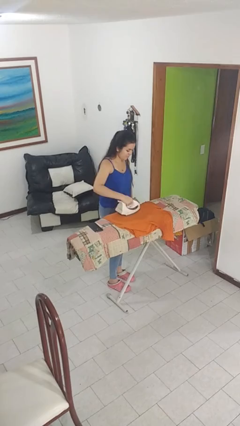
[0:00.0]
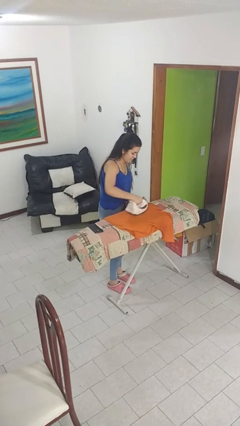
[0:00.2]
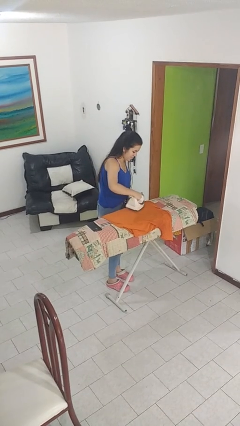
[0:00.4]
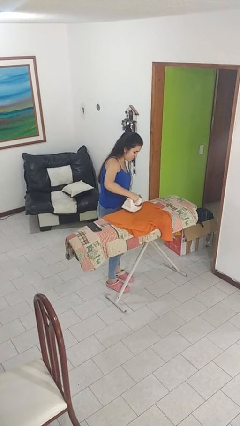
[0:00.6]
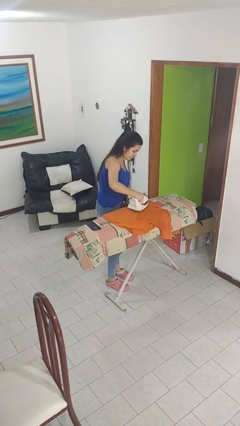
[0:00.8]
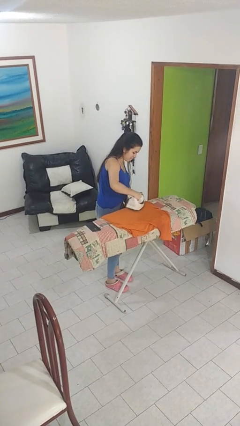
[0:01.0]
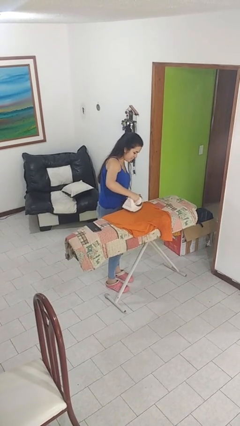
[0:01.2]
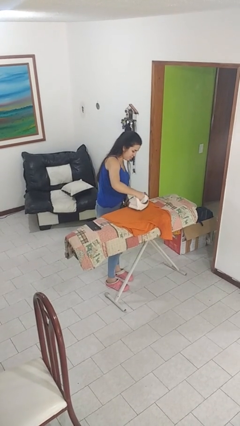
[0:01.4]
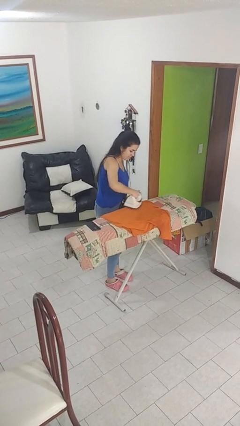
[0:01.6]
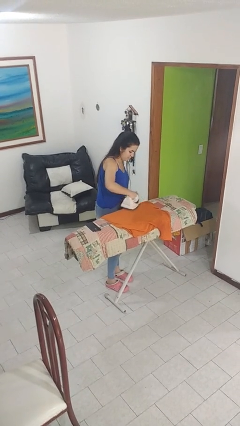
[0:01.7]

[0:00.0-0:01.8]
person irons clothes

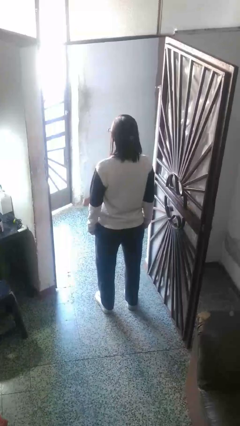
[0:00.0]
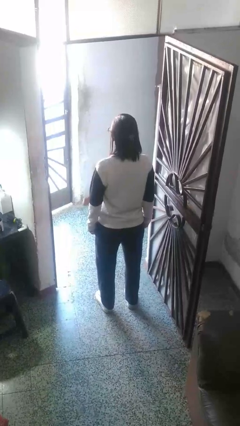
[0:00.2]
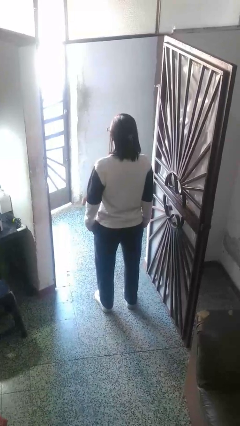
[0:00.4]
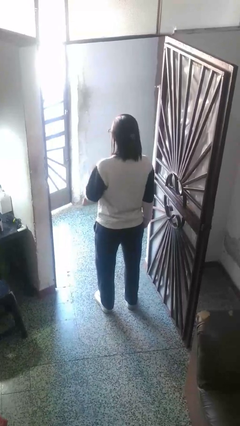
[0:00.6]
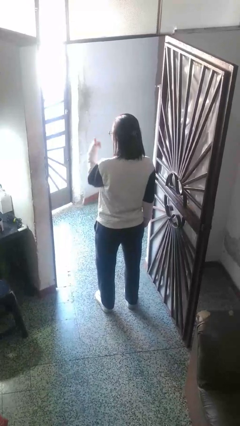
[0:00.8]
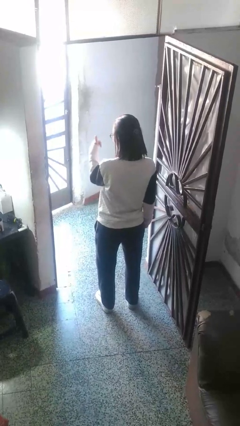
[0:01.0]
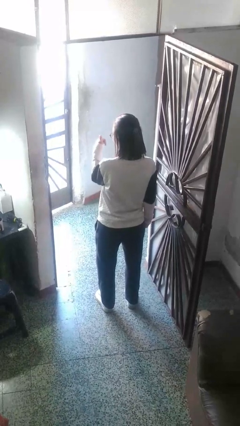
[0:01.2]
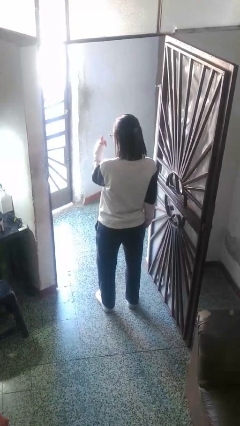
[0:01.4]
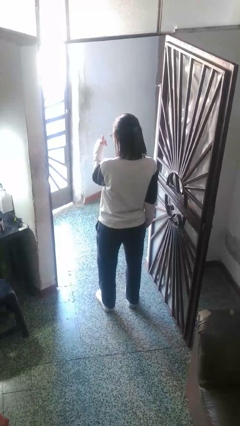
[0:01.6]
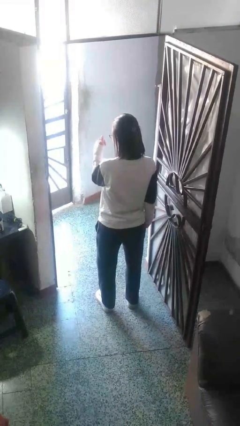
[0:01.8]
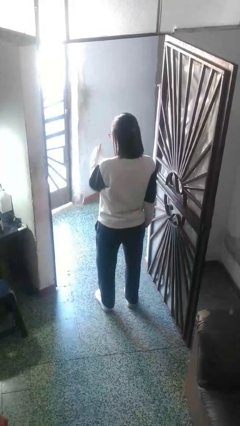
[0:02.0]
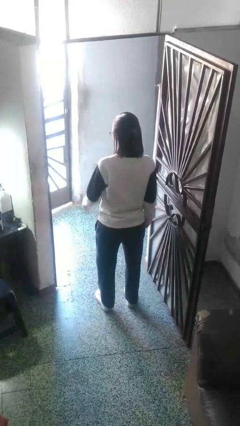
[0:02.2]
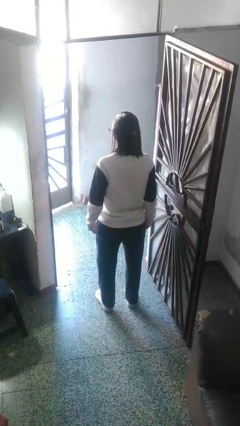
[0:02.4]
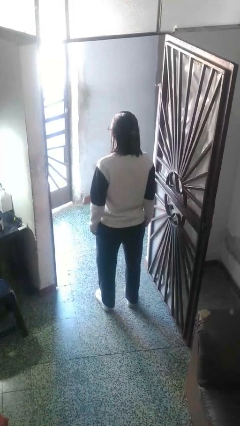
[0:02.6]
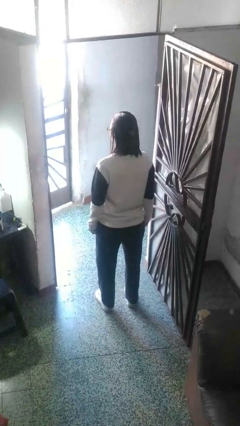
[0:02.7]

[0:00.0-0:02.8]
person gestures thumbs up

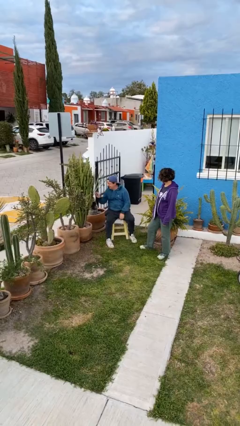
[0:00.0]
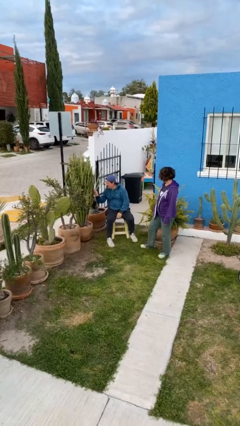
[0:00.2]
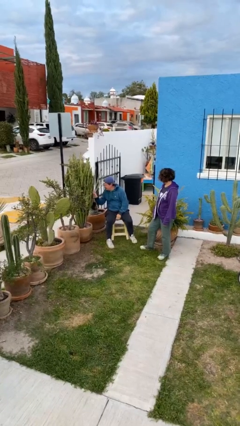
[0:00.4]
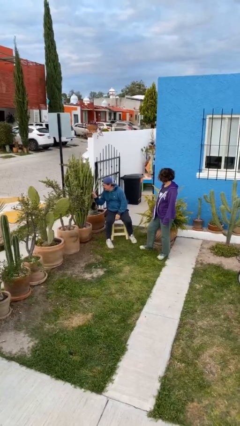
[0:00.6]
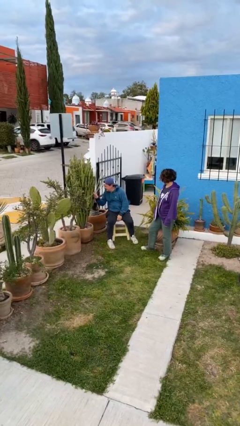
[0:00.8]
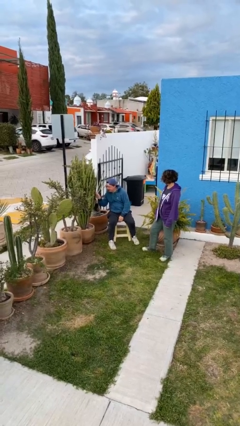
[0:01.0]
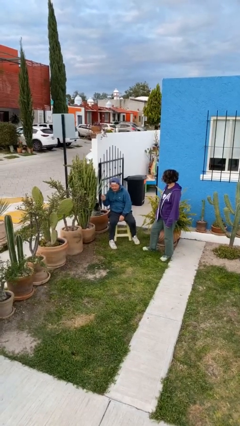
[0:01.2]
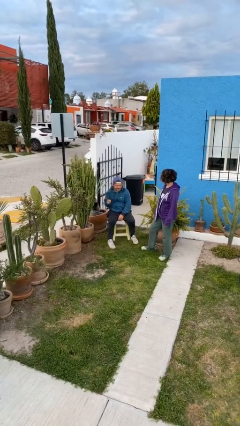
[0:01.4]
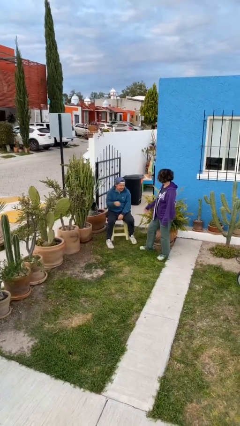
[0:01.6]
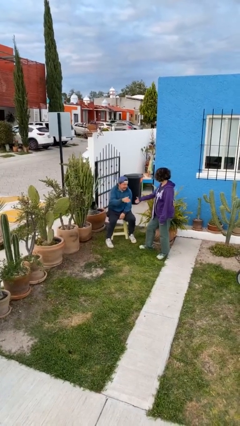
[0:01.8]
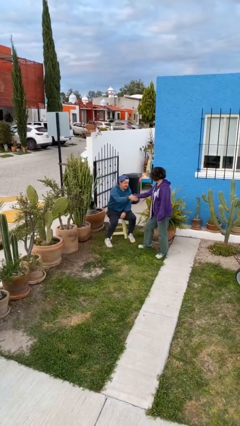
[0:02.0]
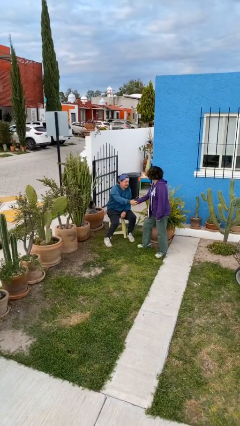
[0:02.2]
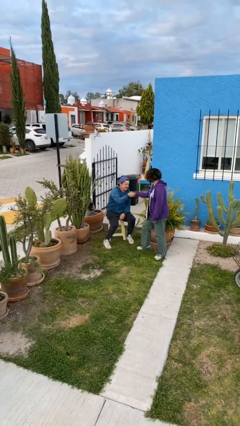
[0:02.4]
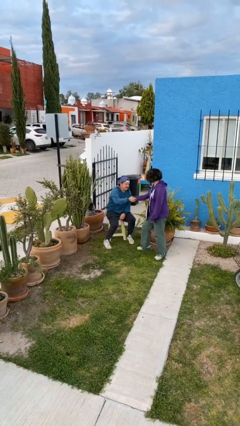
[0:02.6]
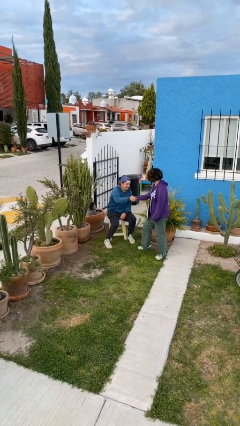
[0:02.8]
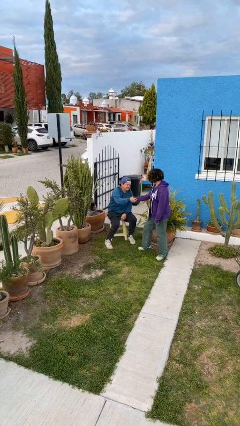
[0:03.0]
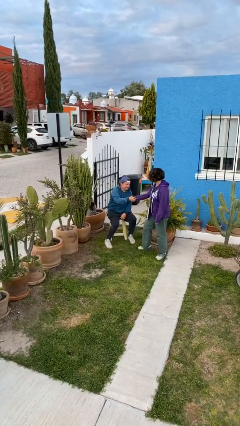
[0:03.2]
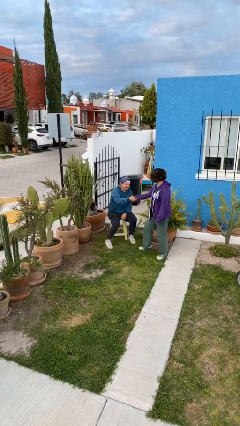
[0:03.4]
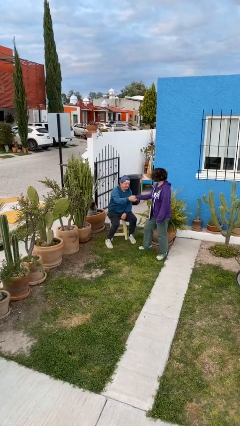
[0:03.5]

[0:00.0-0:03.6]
person shakes hand

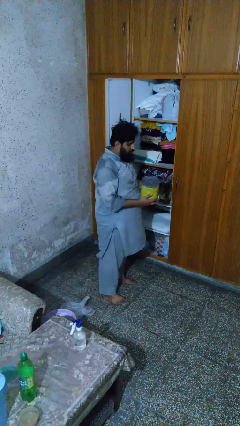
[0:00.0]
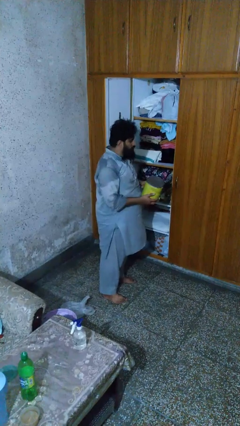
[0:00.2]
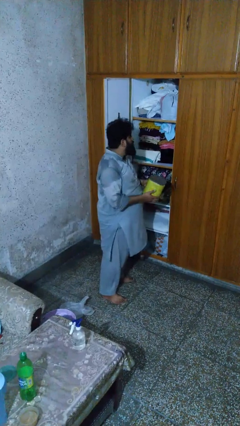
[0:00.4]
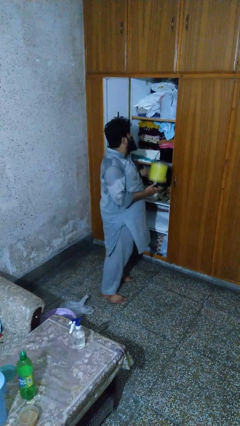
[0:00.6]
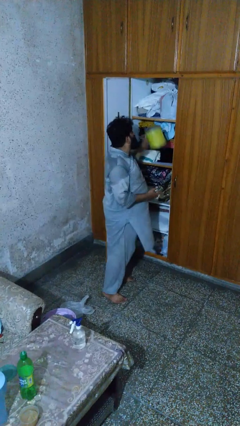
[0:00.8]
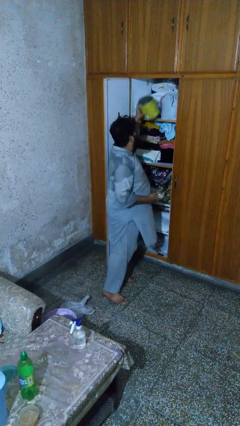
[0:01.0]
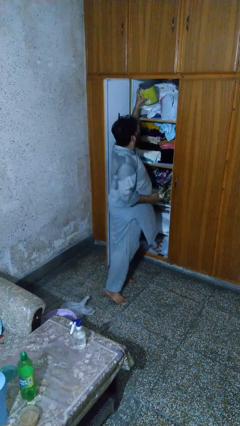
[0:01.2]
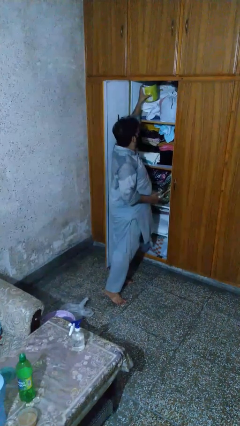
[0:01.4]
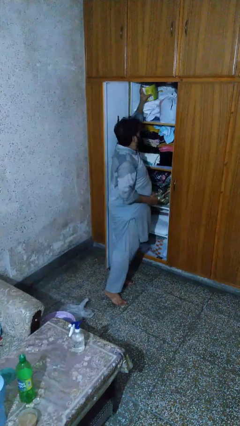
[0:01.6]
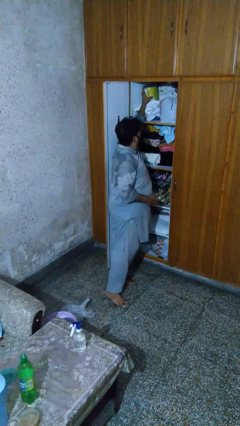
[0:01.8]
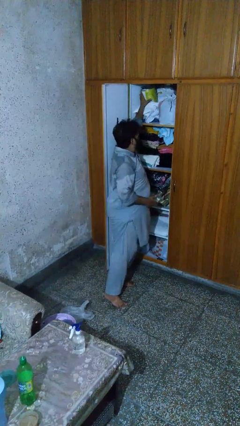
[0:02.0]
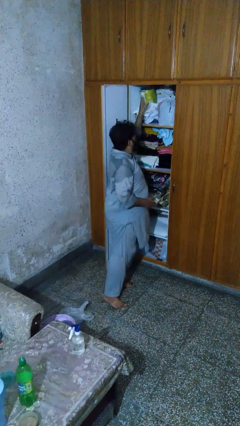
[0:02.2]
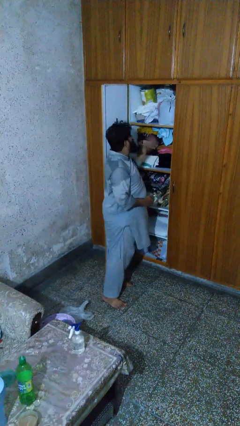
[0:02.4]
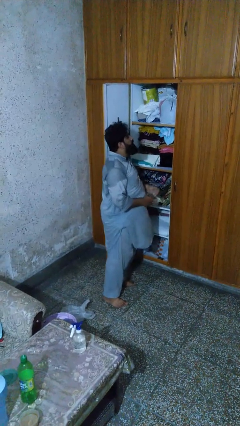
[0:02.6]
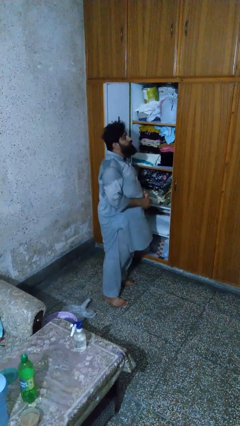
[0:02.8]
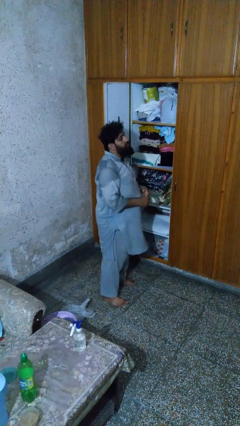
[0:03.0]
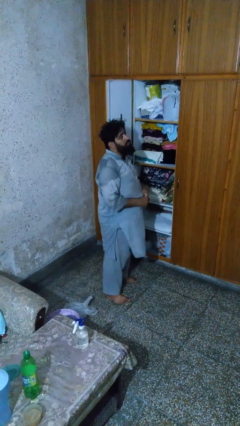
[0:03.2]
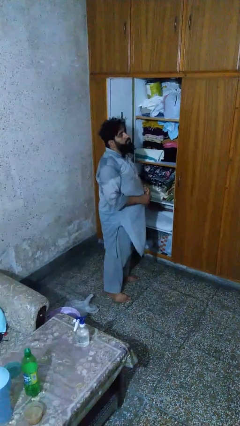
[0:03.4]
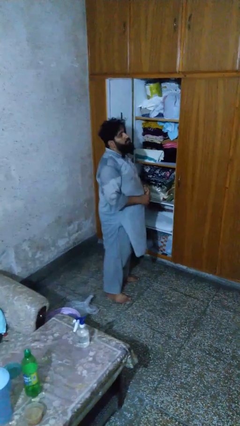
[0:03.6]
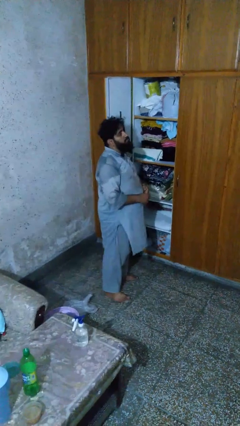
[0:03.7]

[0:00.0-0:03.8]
person puts down object on shelf

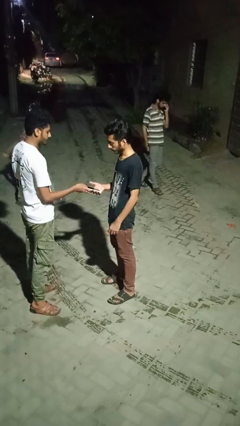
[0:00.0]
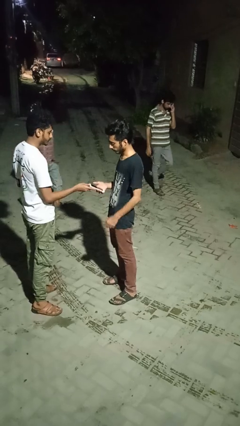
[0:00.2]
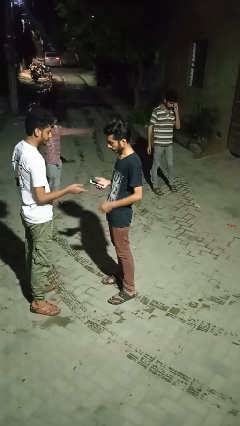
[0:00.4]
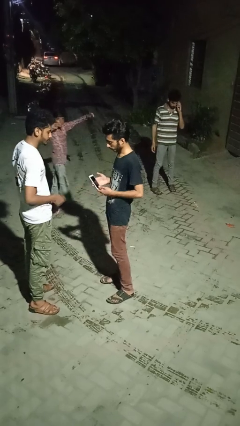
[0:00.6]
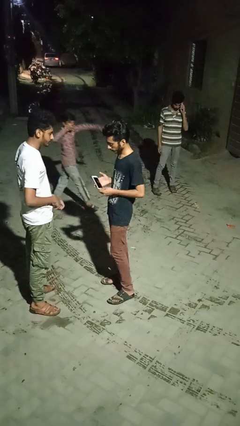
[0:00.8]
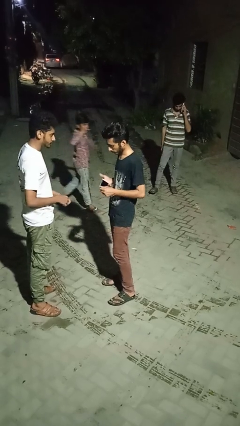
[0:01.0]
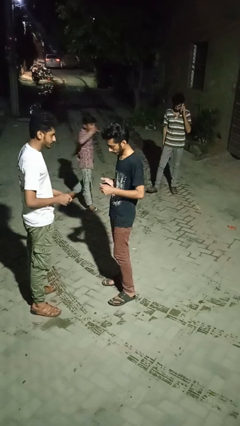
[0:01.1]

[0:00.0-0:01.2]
person transfers object to person

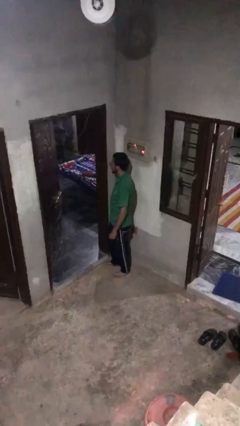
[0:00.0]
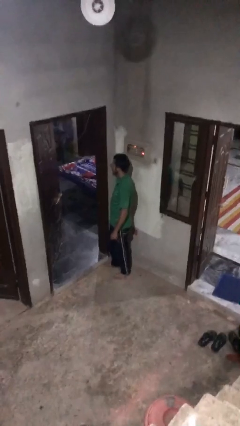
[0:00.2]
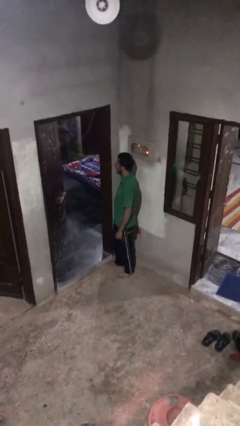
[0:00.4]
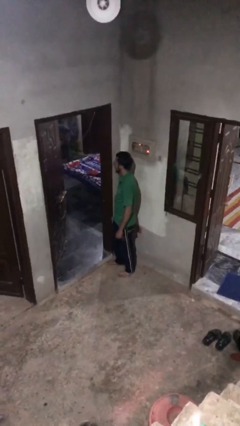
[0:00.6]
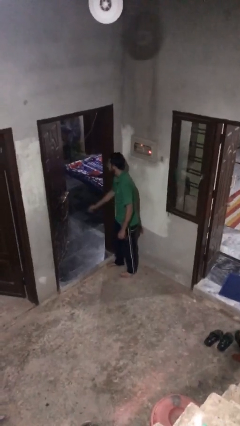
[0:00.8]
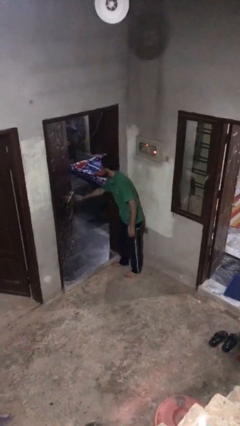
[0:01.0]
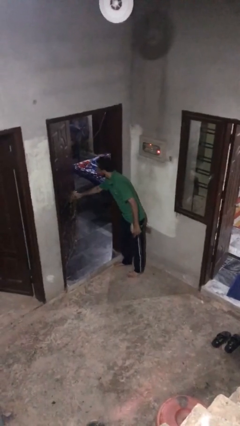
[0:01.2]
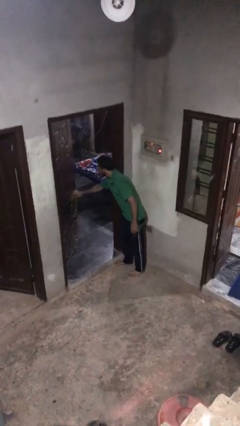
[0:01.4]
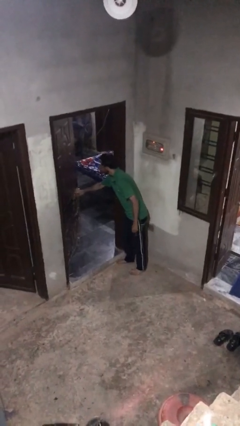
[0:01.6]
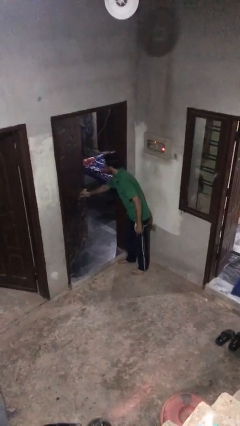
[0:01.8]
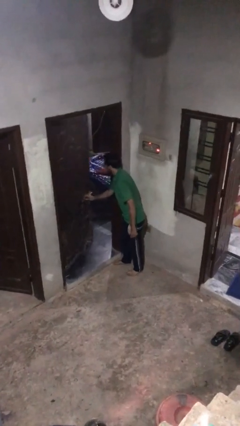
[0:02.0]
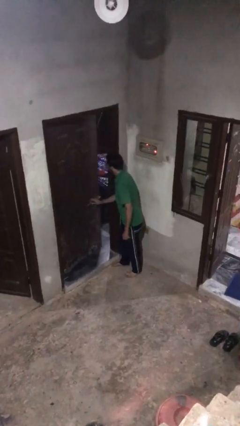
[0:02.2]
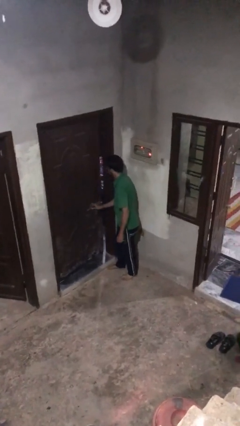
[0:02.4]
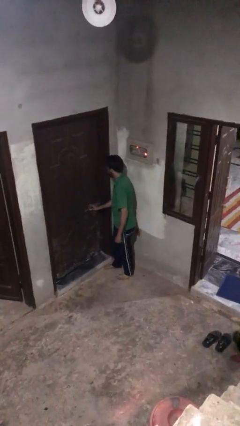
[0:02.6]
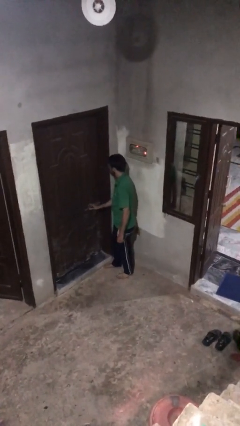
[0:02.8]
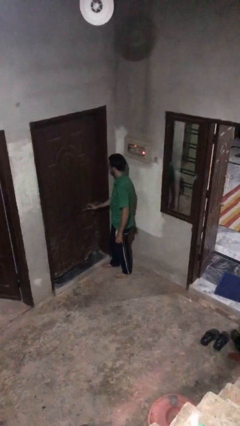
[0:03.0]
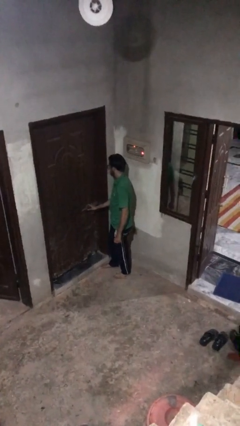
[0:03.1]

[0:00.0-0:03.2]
person closes facility door

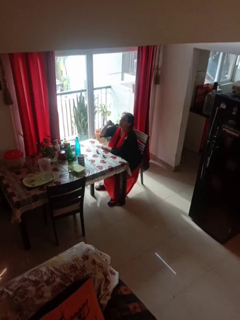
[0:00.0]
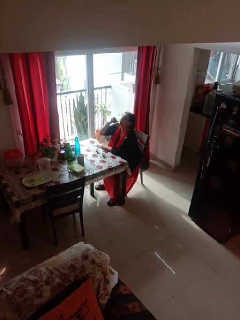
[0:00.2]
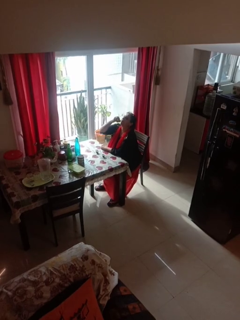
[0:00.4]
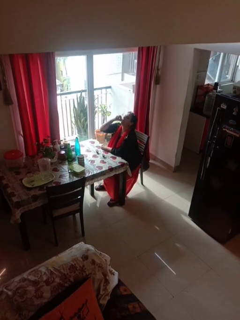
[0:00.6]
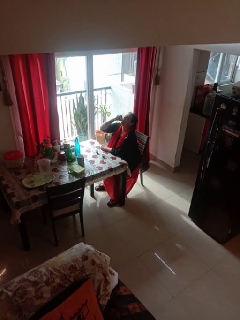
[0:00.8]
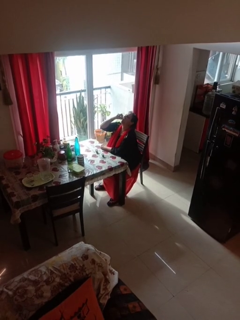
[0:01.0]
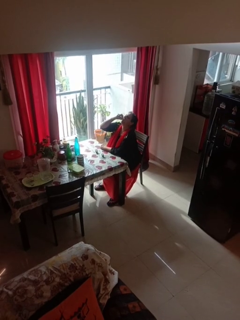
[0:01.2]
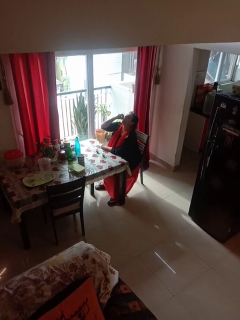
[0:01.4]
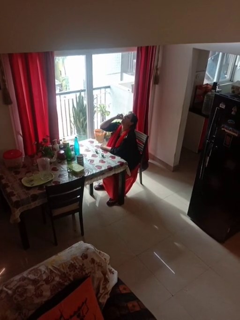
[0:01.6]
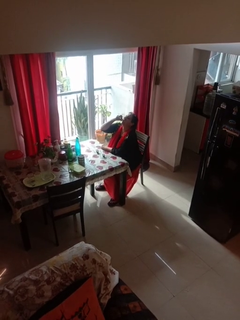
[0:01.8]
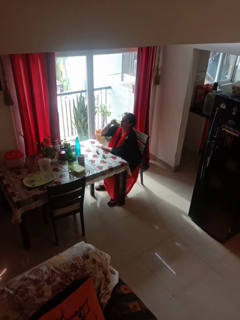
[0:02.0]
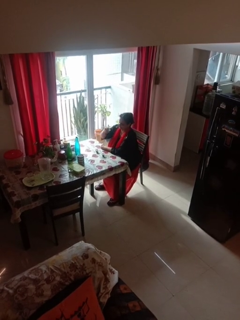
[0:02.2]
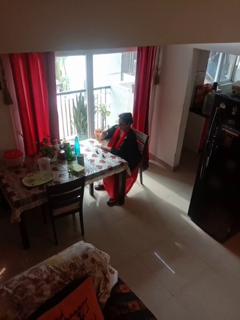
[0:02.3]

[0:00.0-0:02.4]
person drinks from shotglass
